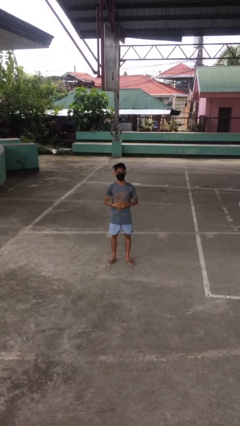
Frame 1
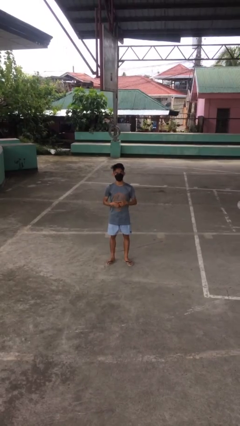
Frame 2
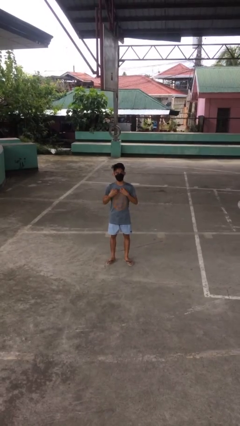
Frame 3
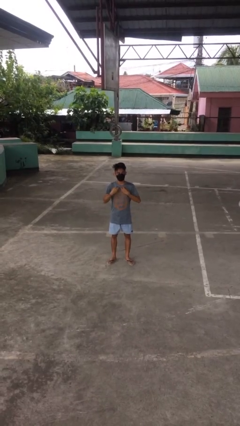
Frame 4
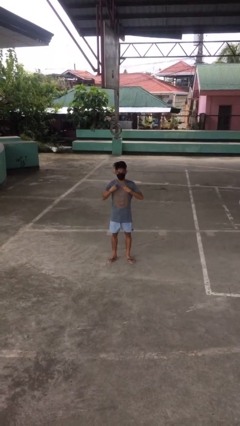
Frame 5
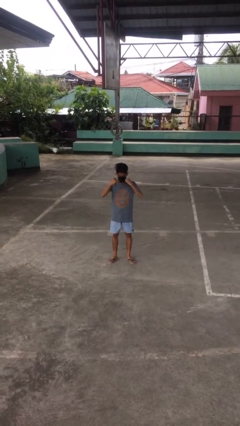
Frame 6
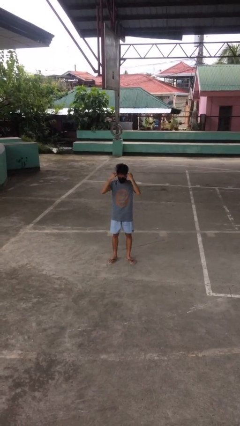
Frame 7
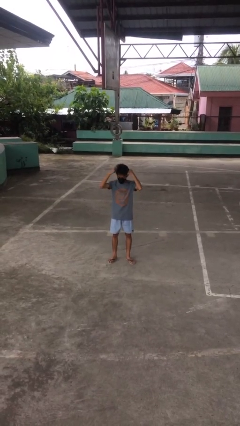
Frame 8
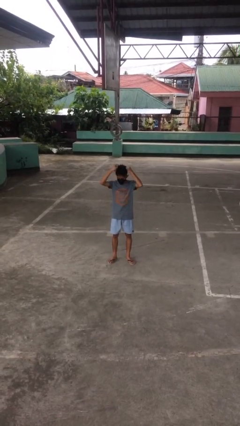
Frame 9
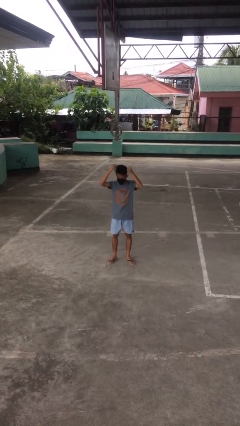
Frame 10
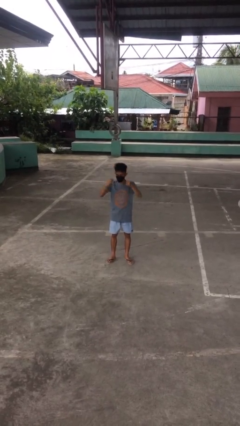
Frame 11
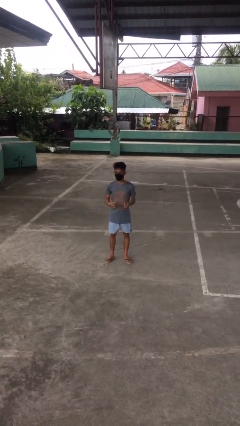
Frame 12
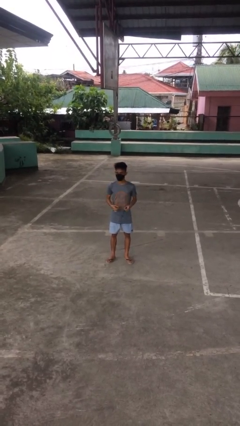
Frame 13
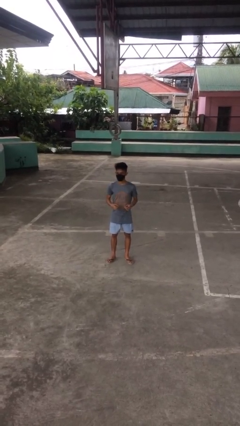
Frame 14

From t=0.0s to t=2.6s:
person takes off necklace

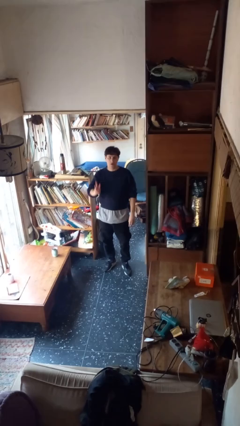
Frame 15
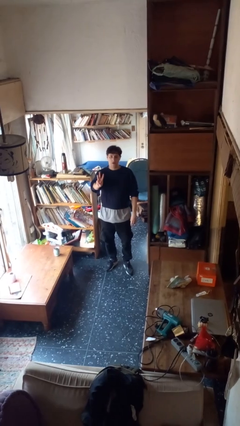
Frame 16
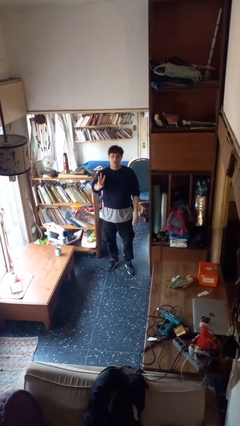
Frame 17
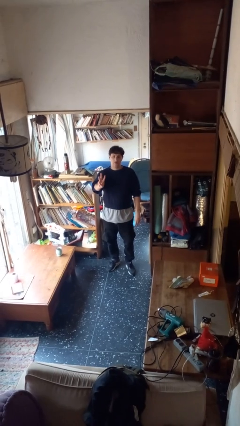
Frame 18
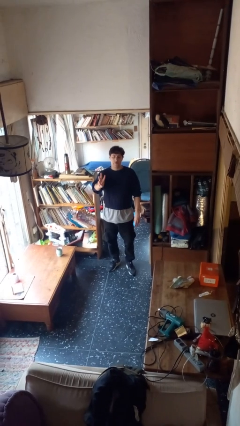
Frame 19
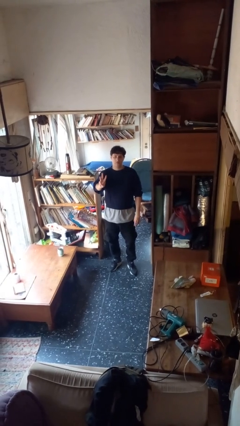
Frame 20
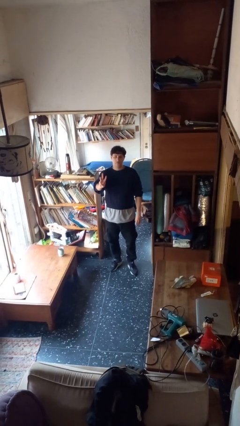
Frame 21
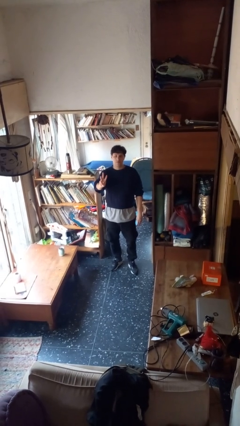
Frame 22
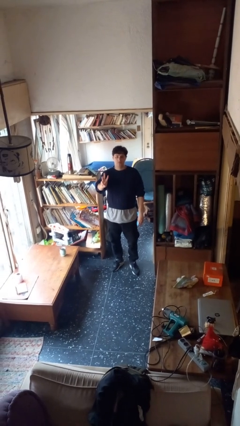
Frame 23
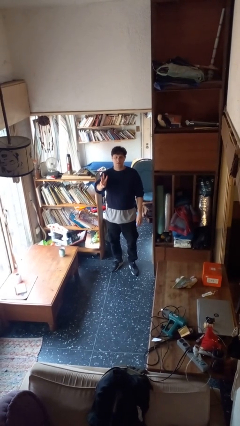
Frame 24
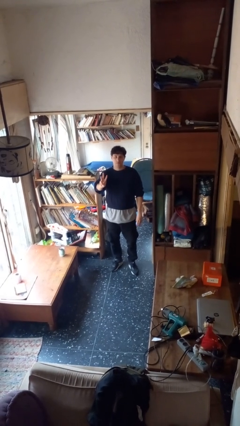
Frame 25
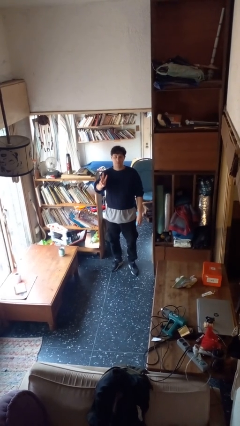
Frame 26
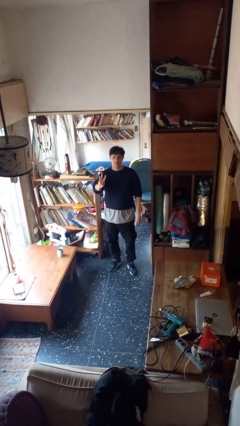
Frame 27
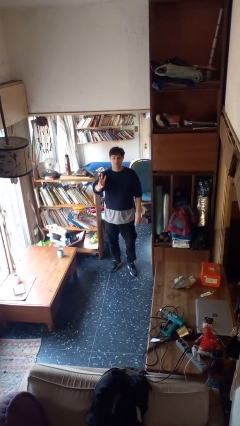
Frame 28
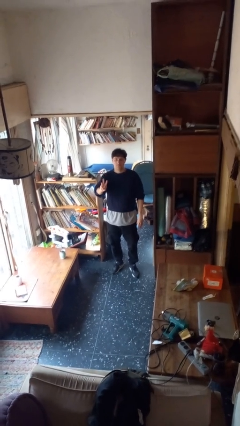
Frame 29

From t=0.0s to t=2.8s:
person gestures number three

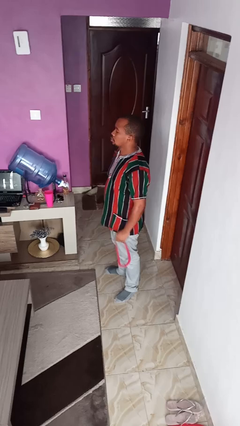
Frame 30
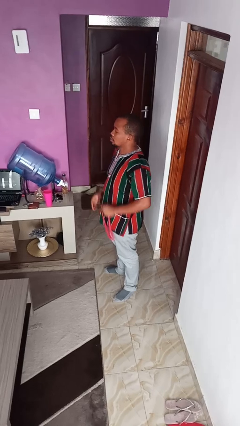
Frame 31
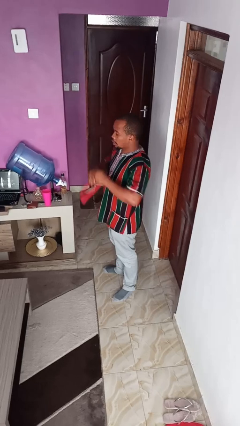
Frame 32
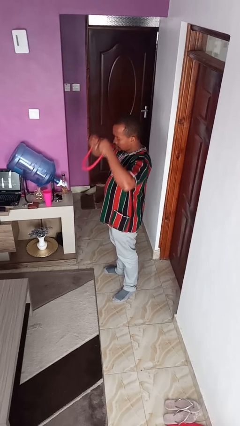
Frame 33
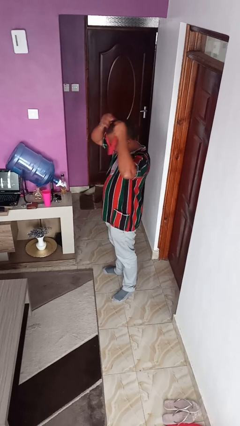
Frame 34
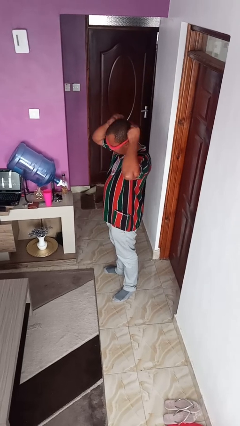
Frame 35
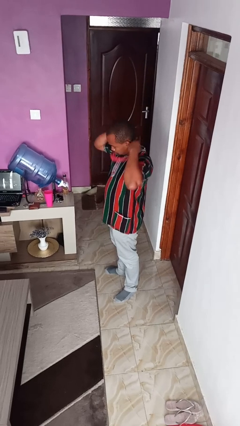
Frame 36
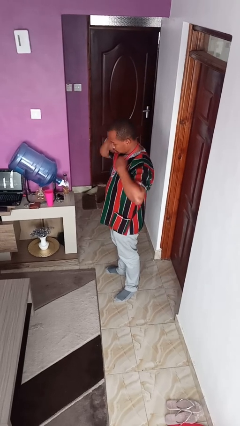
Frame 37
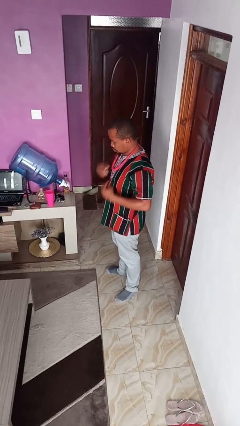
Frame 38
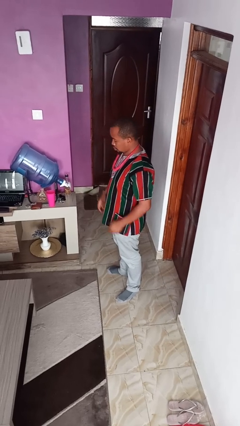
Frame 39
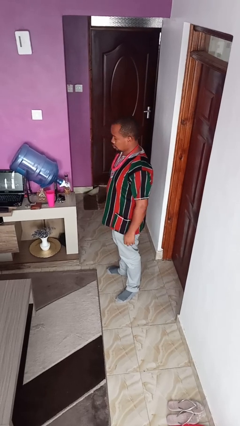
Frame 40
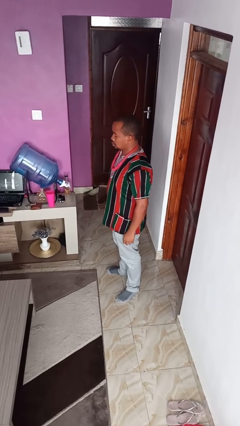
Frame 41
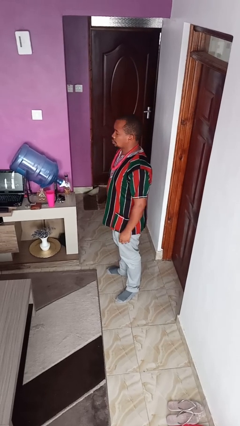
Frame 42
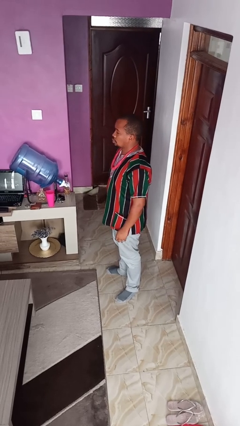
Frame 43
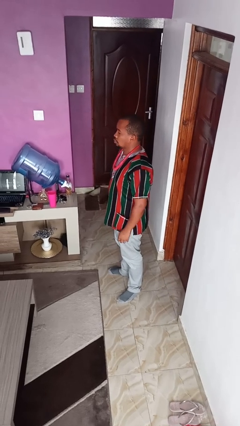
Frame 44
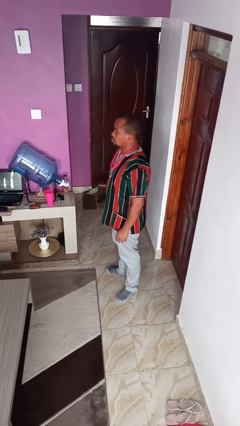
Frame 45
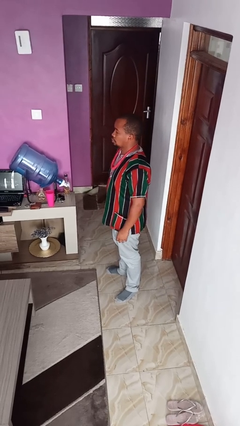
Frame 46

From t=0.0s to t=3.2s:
person puts on necklace

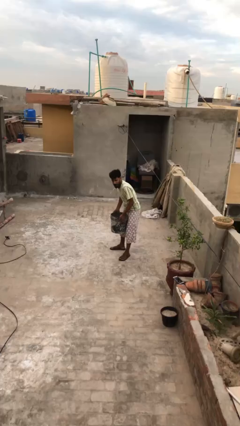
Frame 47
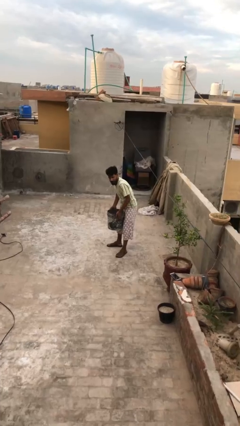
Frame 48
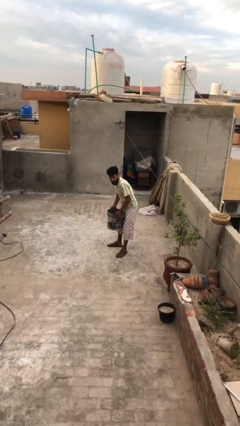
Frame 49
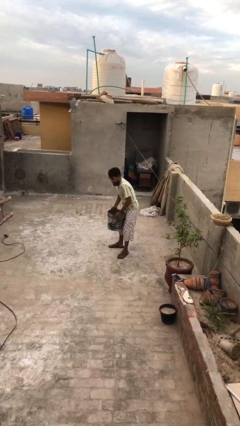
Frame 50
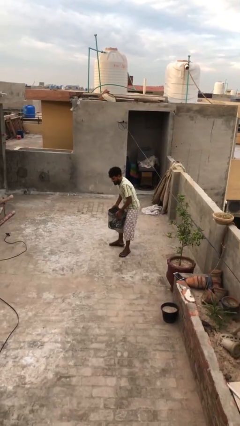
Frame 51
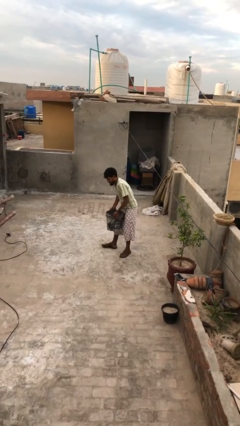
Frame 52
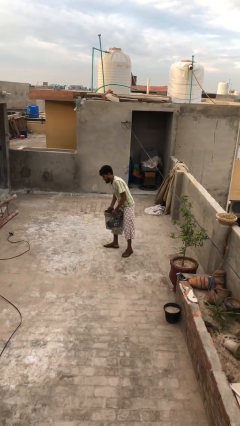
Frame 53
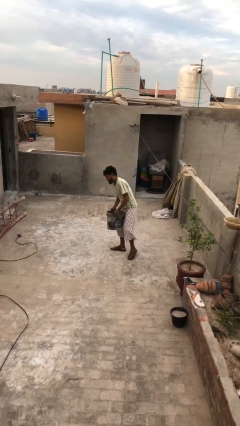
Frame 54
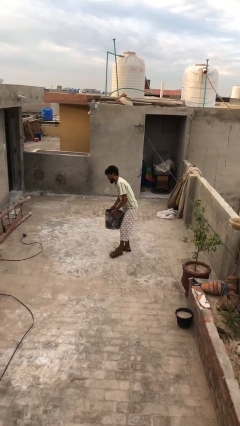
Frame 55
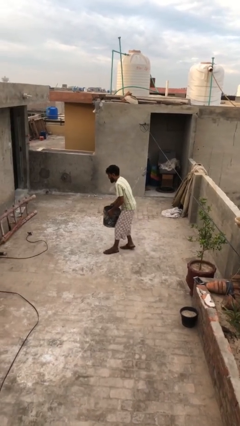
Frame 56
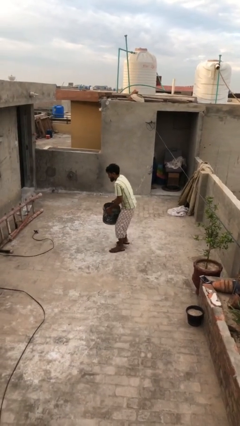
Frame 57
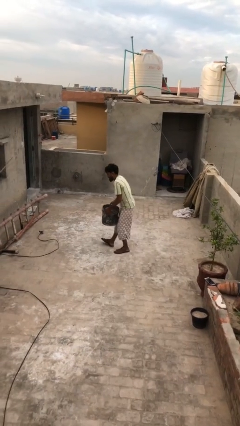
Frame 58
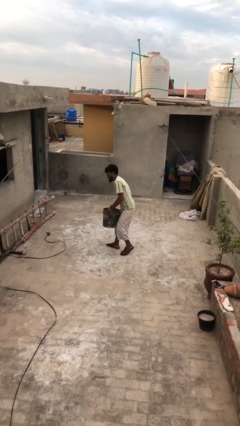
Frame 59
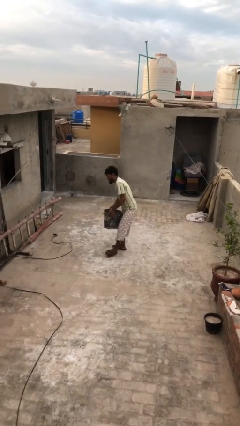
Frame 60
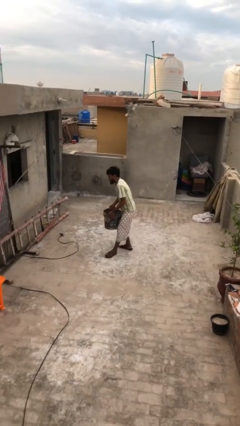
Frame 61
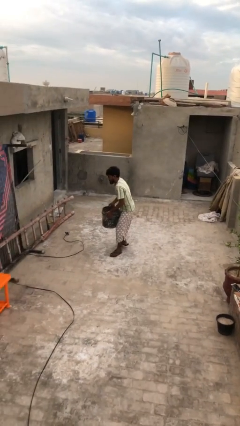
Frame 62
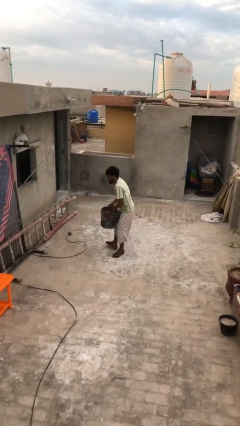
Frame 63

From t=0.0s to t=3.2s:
person carries heavy object

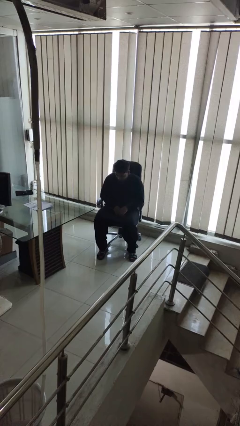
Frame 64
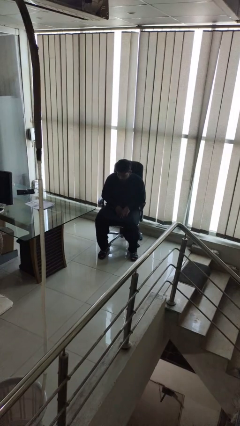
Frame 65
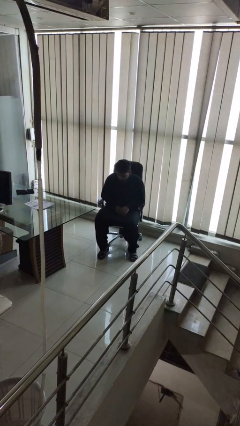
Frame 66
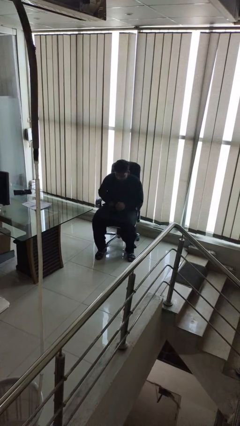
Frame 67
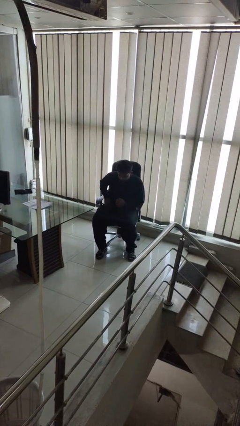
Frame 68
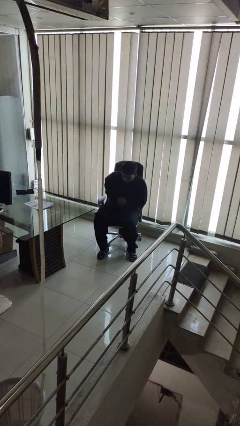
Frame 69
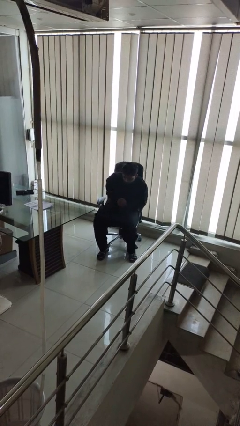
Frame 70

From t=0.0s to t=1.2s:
person takes phone from pocket

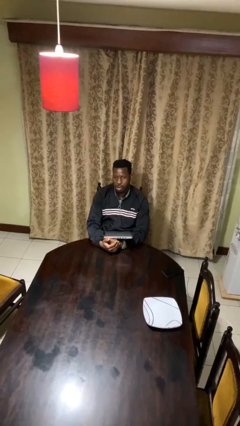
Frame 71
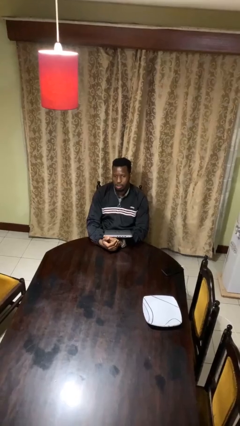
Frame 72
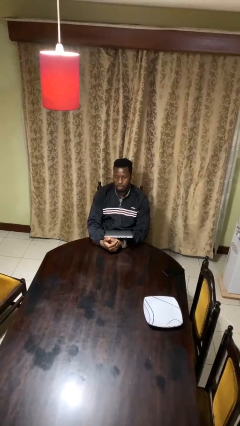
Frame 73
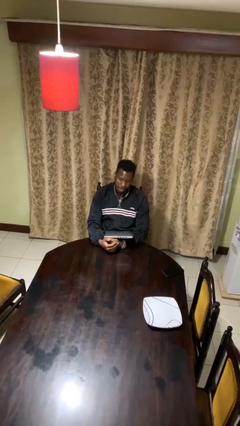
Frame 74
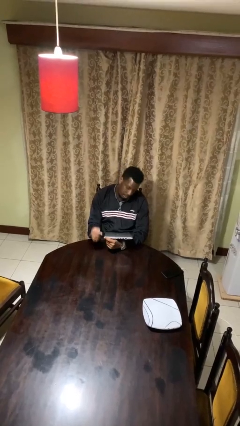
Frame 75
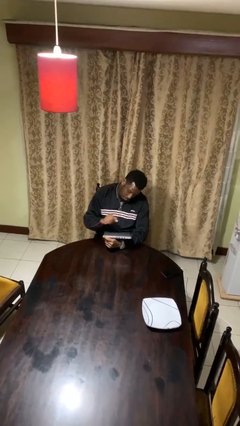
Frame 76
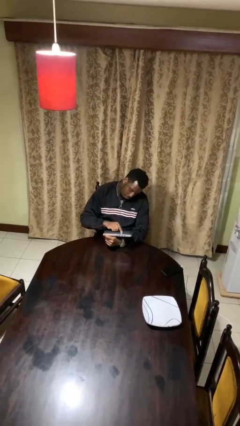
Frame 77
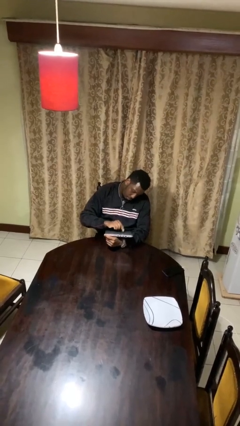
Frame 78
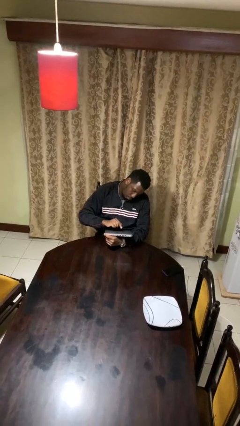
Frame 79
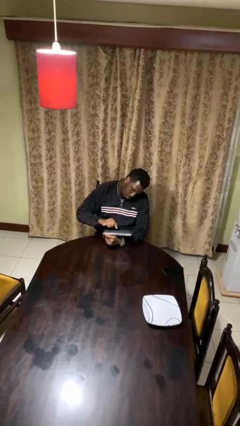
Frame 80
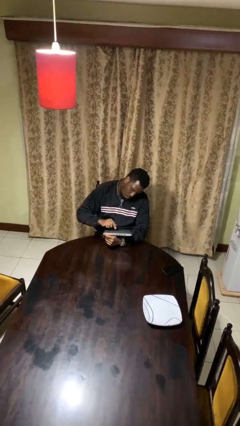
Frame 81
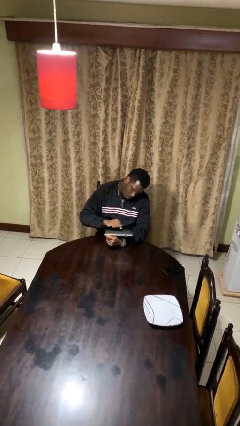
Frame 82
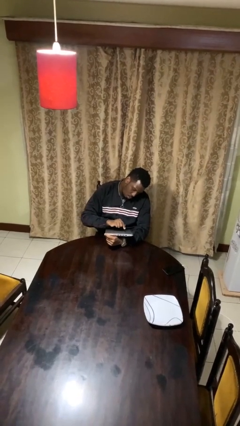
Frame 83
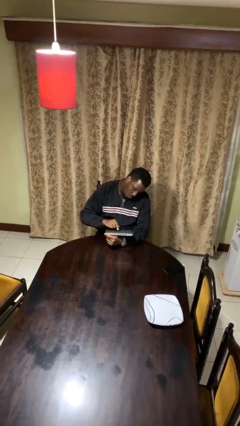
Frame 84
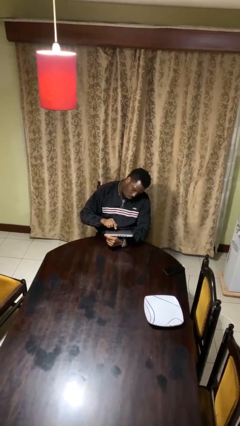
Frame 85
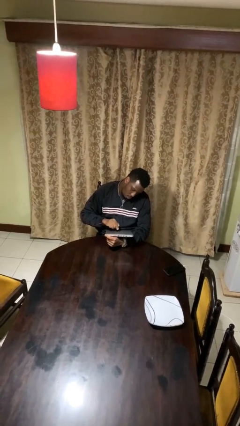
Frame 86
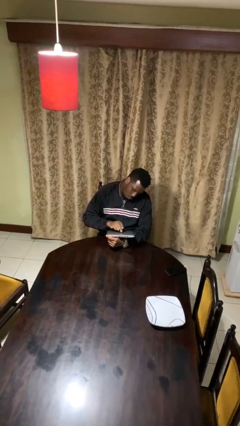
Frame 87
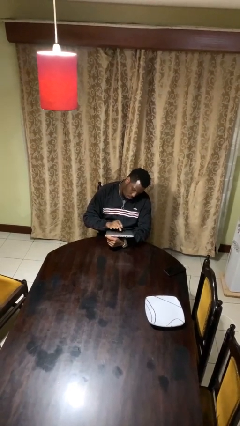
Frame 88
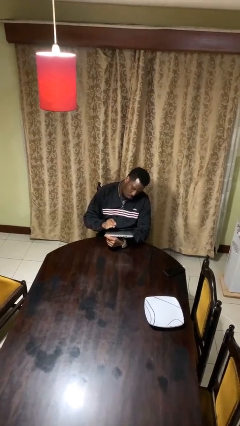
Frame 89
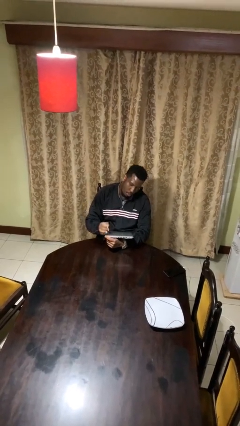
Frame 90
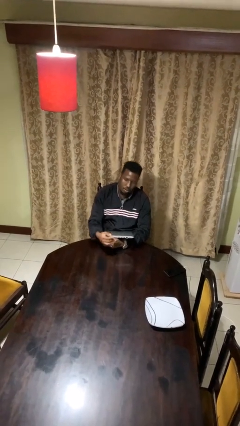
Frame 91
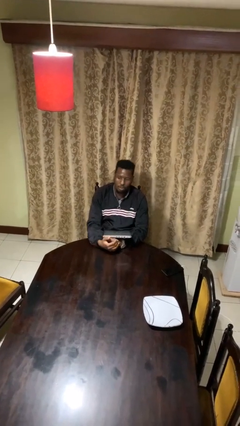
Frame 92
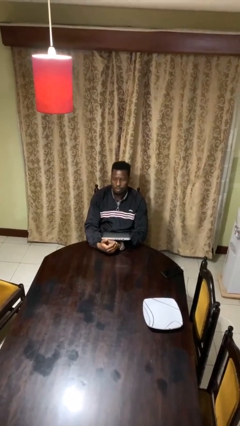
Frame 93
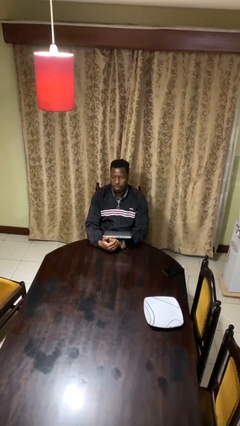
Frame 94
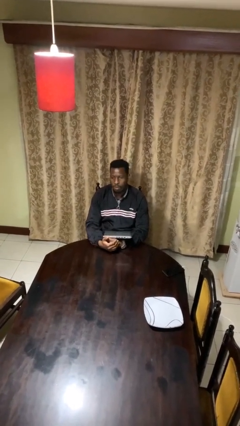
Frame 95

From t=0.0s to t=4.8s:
person interacts with tablet
